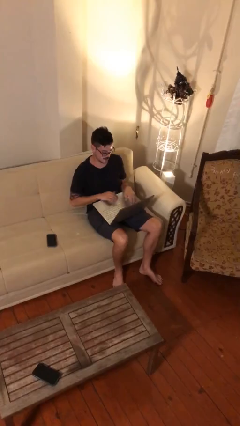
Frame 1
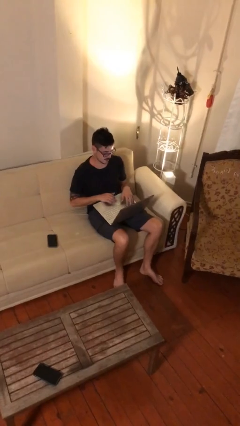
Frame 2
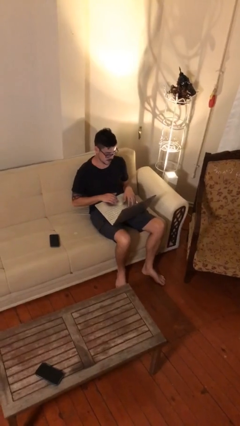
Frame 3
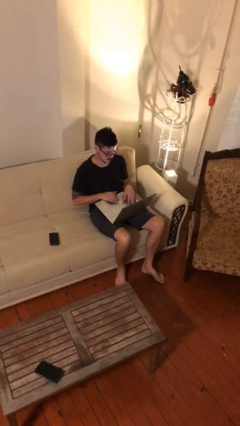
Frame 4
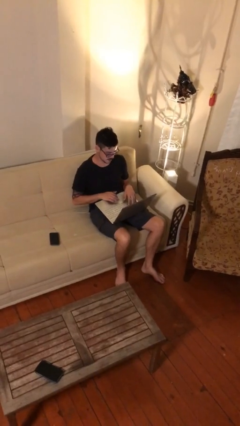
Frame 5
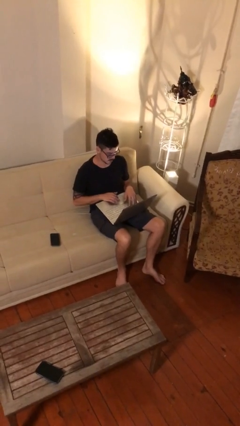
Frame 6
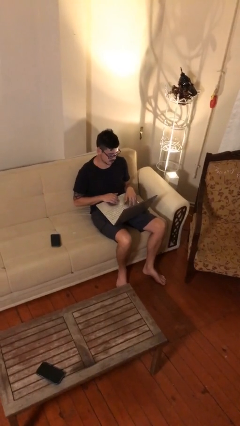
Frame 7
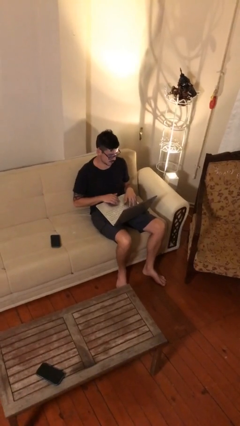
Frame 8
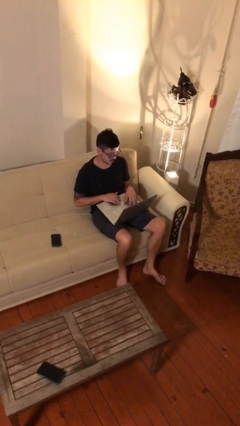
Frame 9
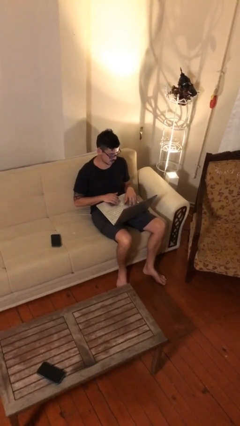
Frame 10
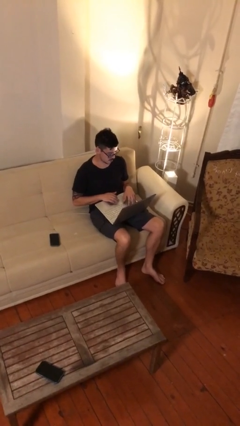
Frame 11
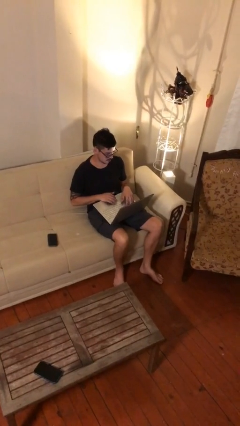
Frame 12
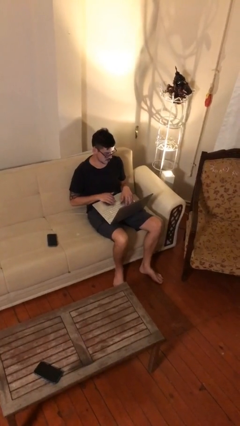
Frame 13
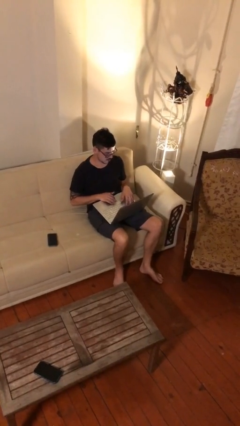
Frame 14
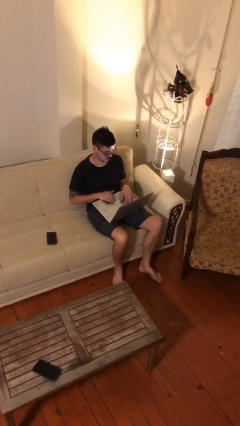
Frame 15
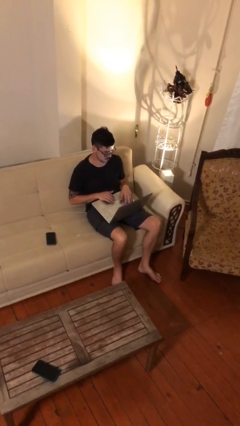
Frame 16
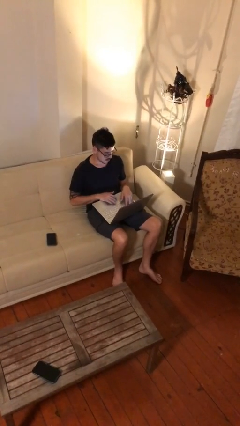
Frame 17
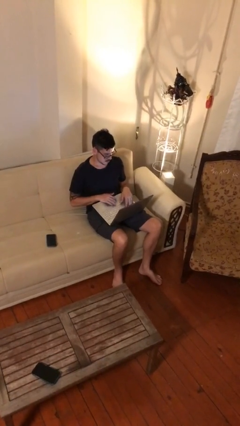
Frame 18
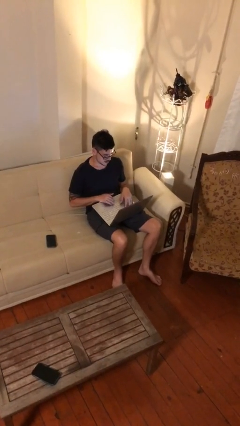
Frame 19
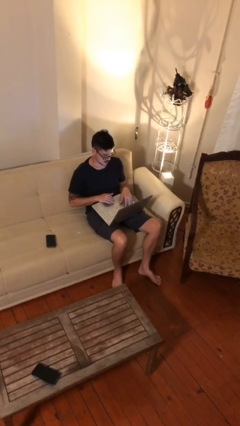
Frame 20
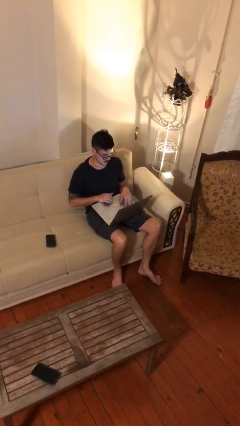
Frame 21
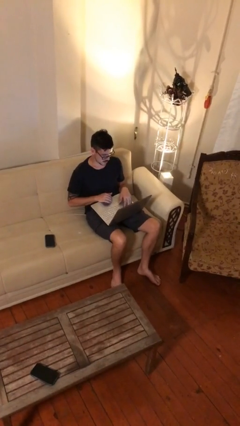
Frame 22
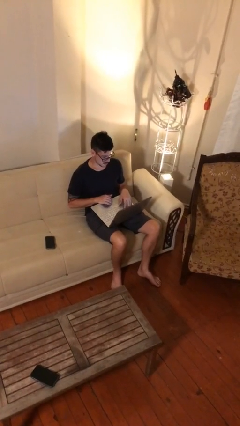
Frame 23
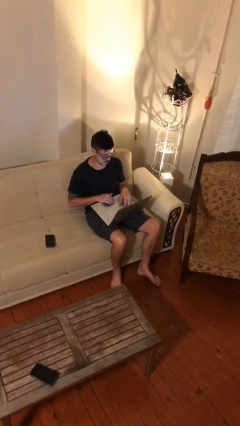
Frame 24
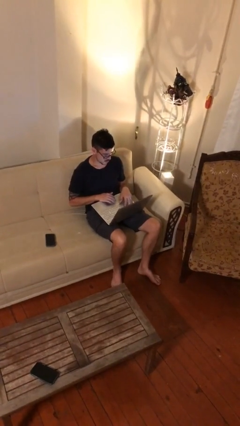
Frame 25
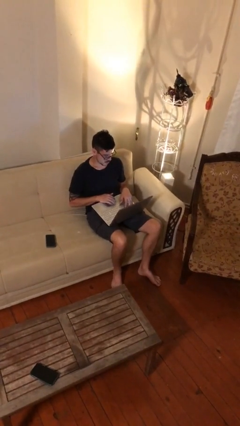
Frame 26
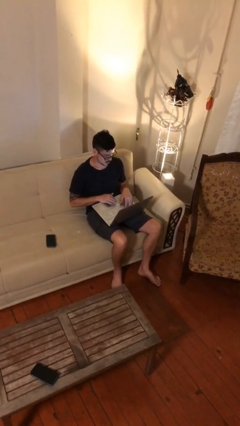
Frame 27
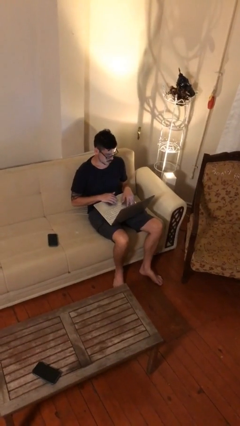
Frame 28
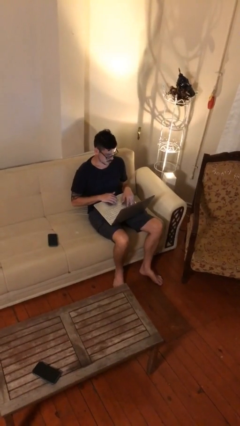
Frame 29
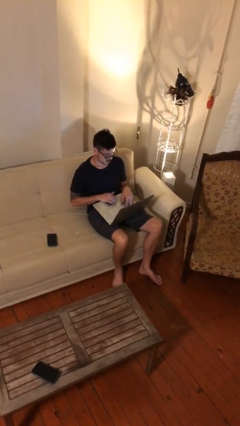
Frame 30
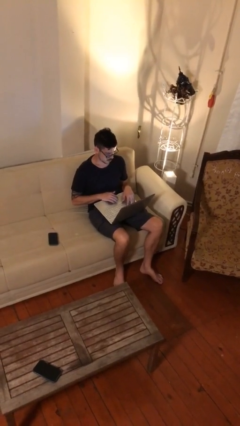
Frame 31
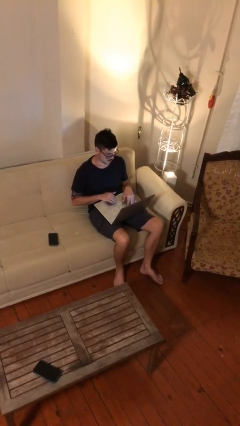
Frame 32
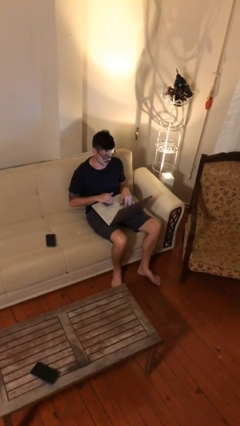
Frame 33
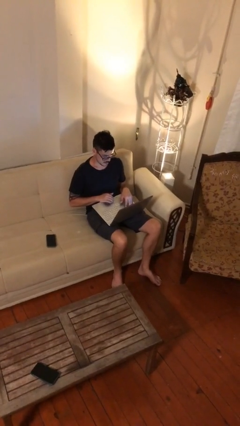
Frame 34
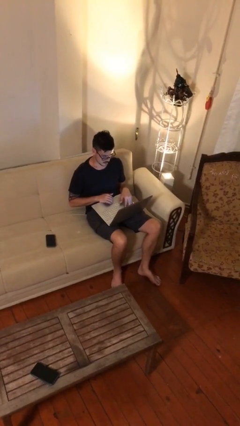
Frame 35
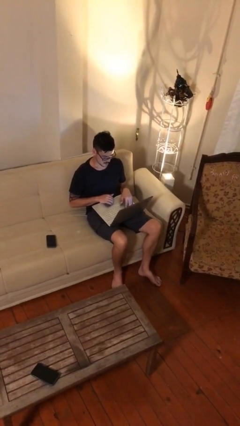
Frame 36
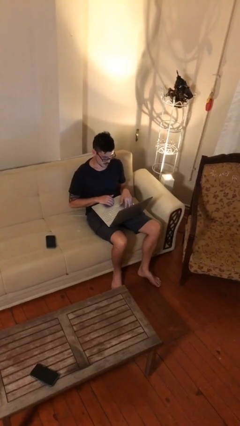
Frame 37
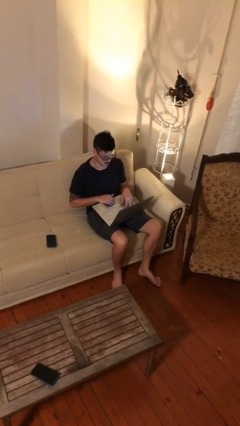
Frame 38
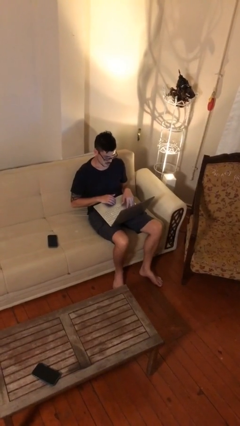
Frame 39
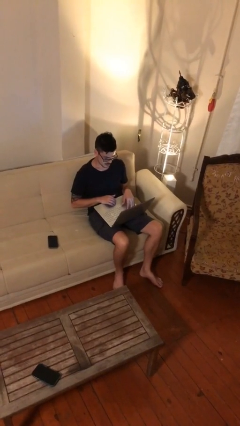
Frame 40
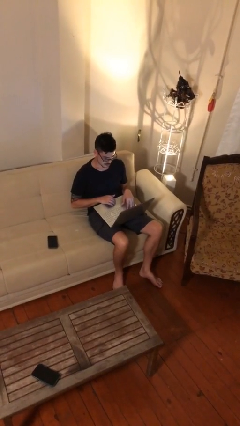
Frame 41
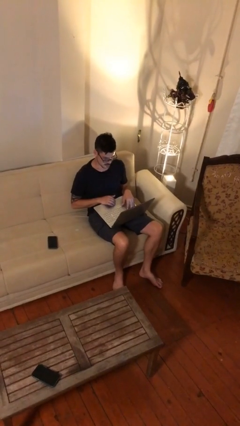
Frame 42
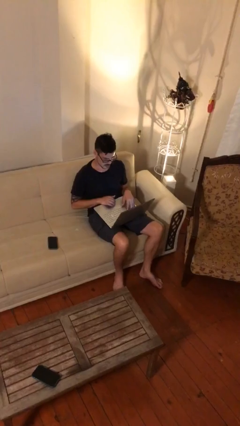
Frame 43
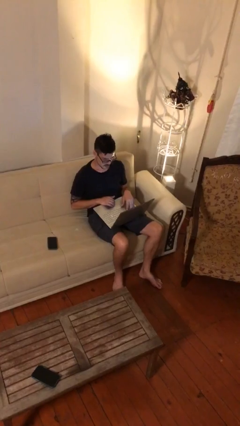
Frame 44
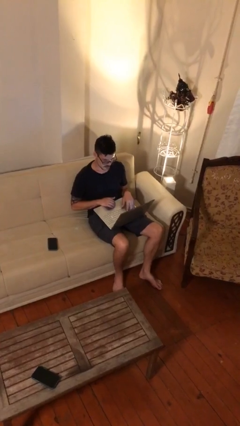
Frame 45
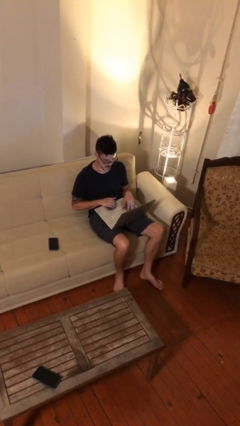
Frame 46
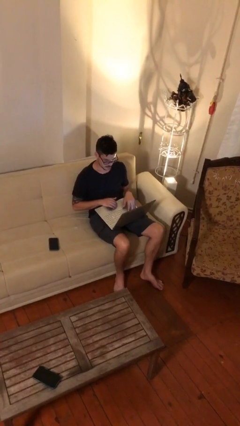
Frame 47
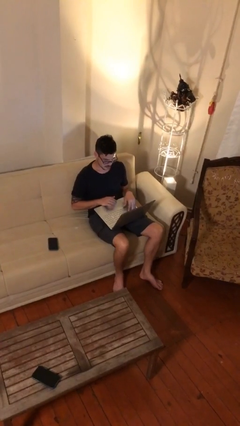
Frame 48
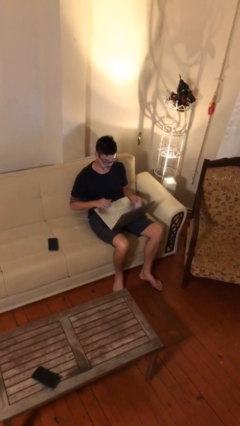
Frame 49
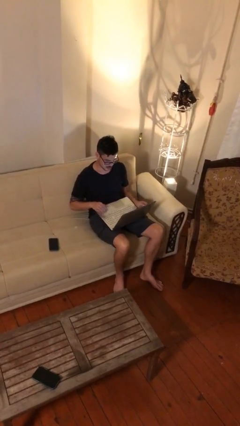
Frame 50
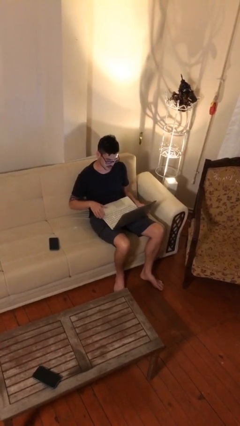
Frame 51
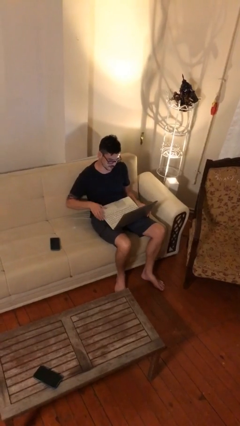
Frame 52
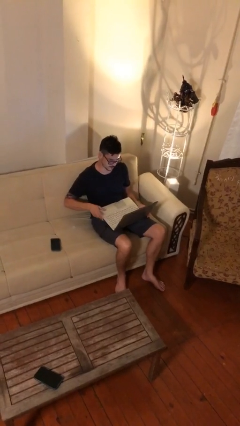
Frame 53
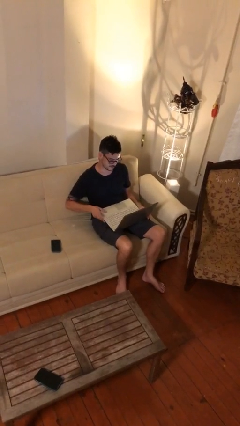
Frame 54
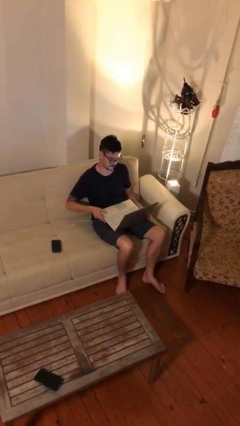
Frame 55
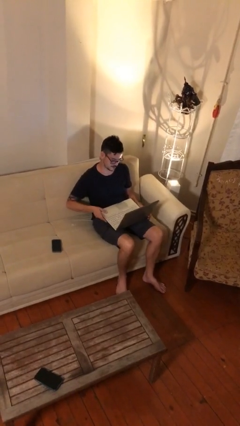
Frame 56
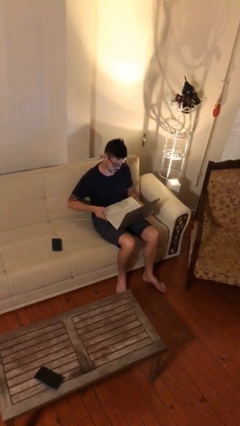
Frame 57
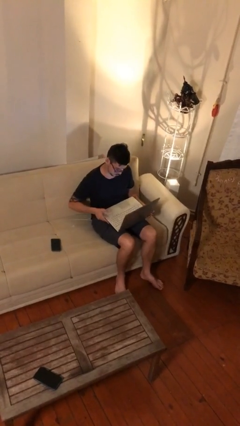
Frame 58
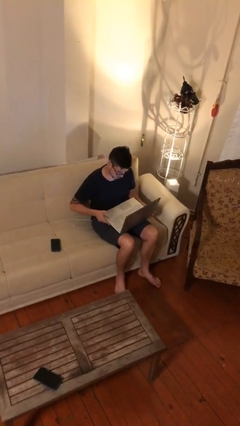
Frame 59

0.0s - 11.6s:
person interacts with laptop

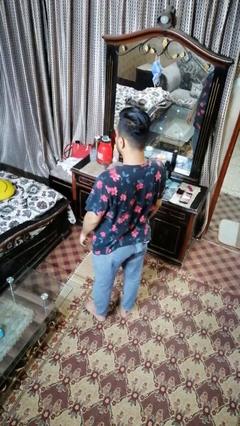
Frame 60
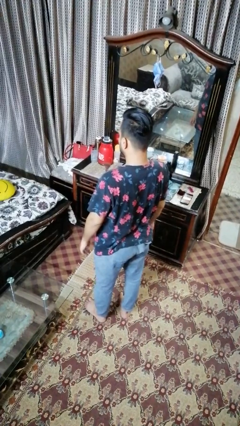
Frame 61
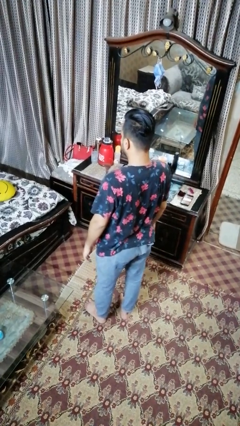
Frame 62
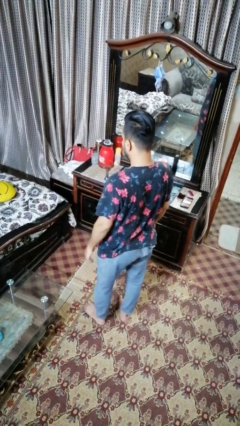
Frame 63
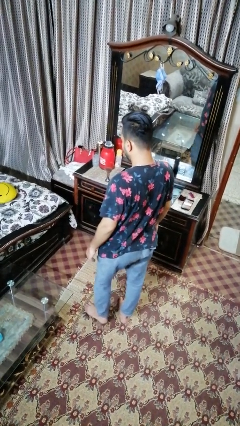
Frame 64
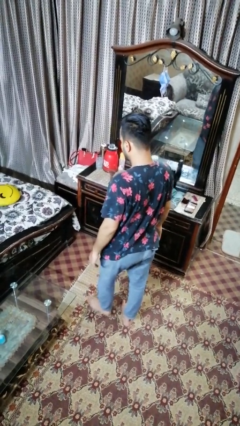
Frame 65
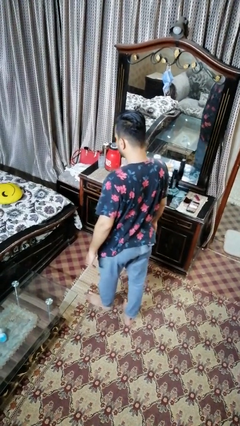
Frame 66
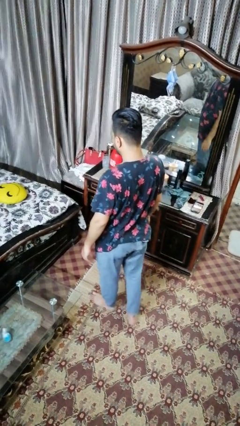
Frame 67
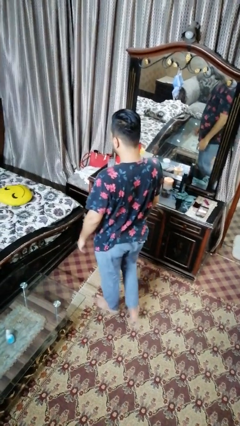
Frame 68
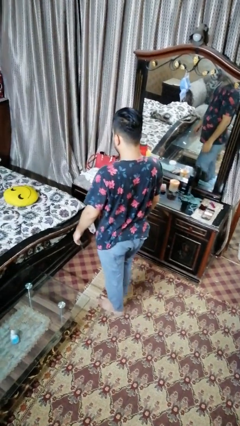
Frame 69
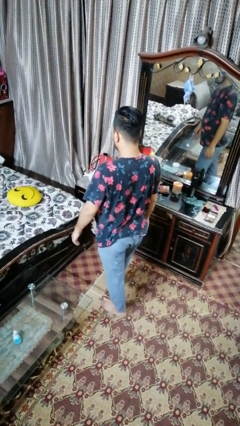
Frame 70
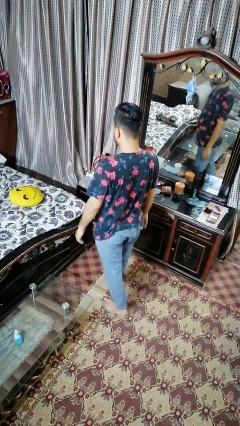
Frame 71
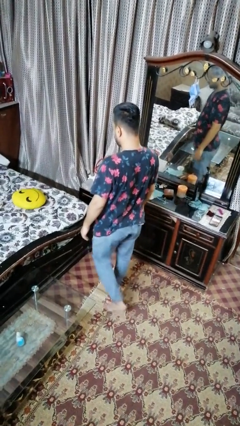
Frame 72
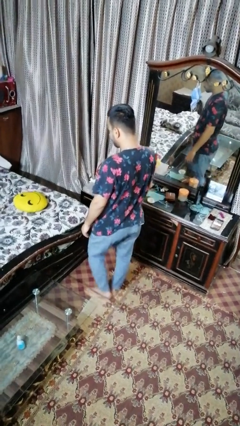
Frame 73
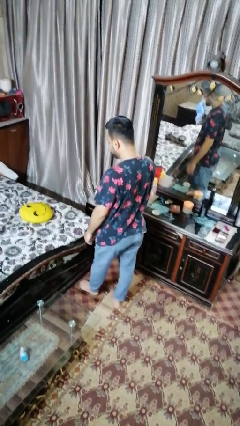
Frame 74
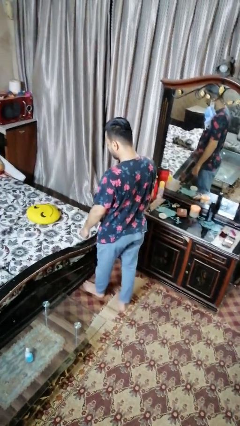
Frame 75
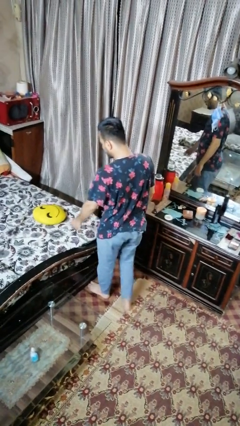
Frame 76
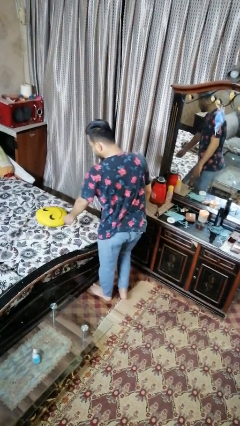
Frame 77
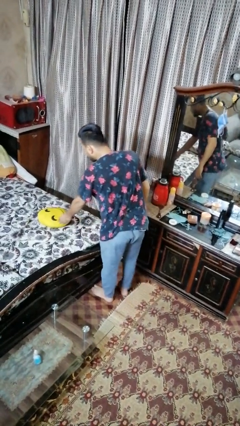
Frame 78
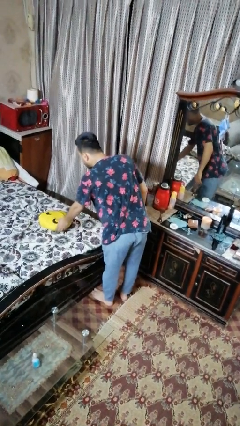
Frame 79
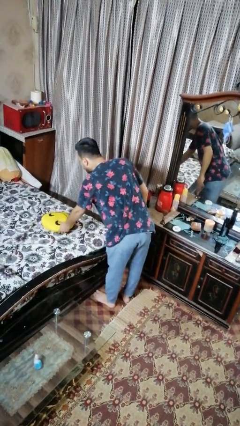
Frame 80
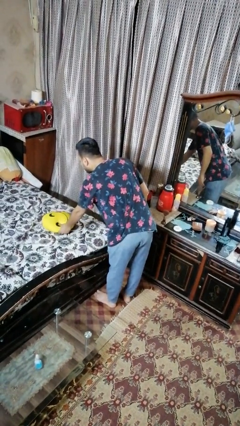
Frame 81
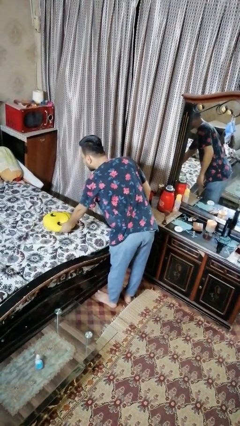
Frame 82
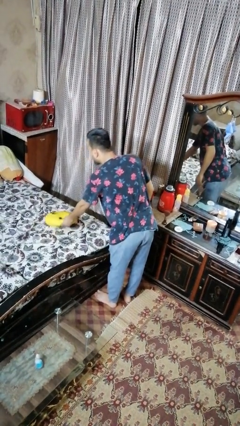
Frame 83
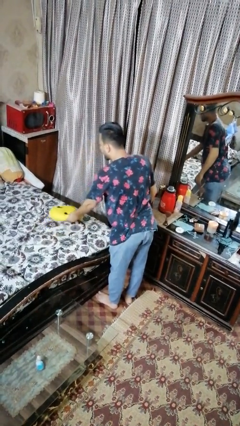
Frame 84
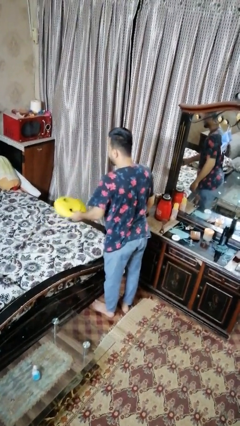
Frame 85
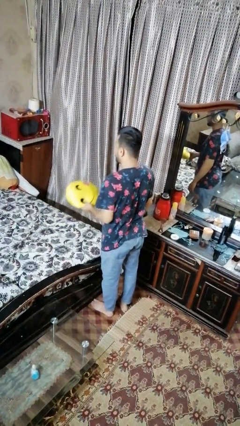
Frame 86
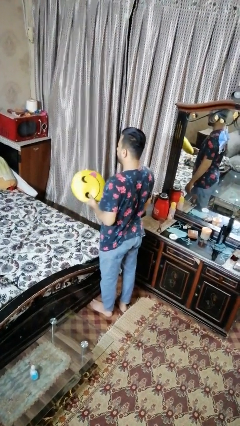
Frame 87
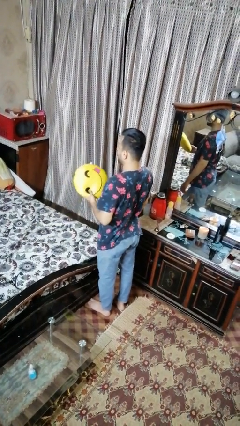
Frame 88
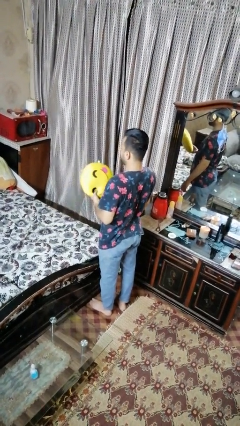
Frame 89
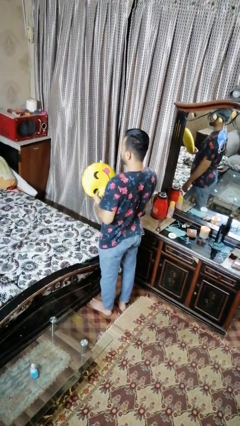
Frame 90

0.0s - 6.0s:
person picks up object from bed

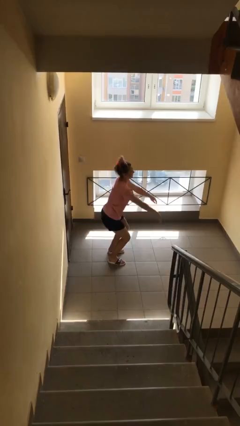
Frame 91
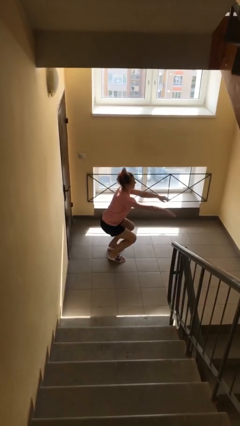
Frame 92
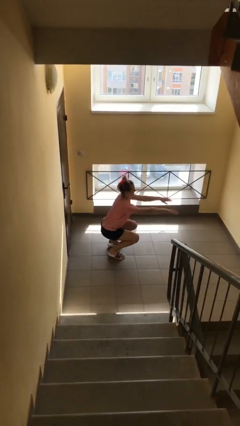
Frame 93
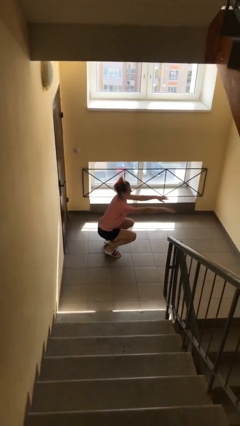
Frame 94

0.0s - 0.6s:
person squats
